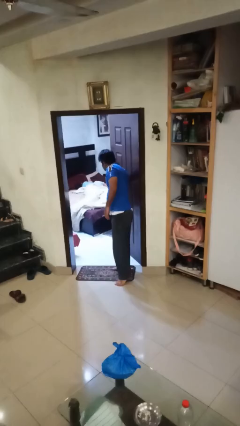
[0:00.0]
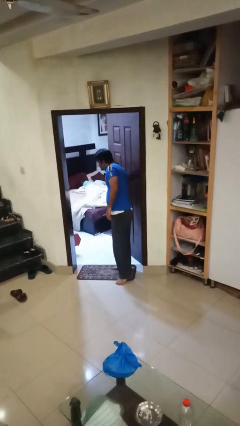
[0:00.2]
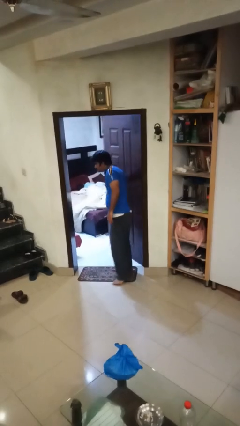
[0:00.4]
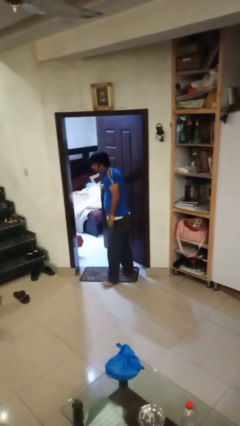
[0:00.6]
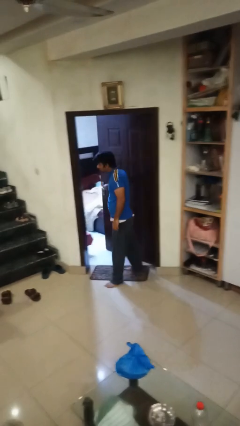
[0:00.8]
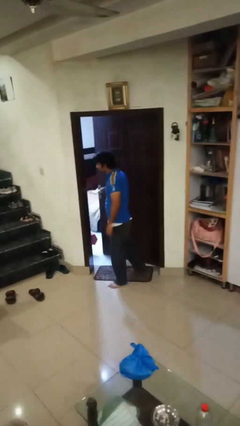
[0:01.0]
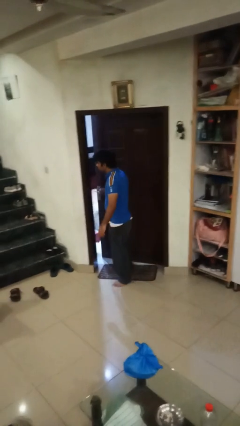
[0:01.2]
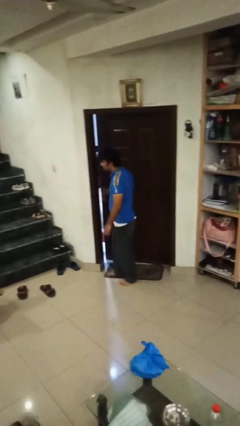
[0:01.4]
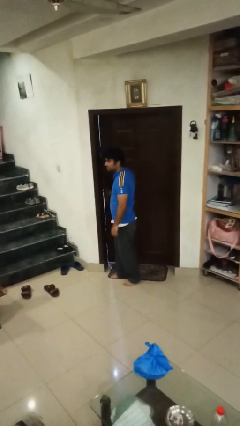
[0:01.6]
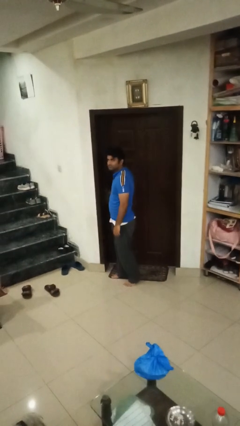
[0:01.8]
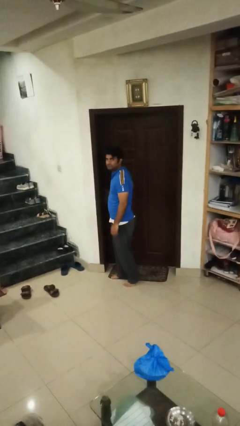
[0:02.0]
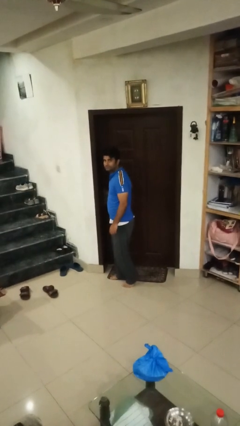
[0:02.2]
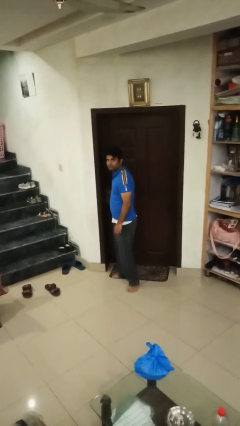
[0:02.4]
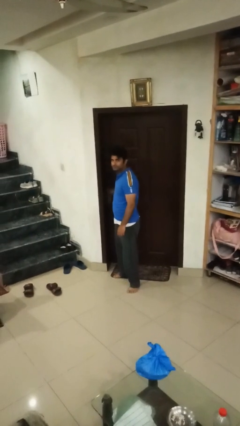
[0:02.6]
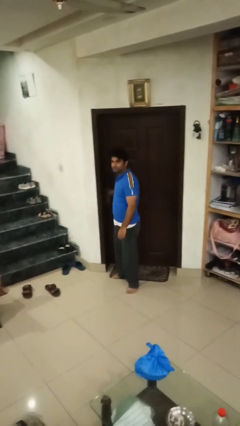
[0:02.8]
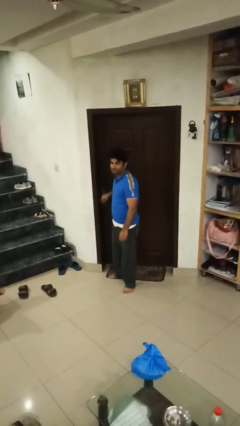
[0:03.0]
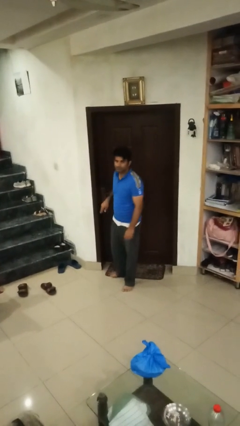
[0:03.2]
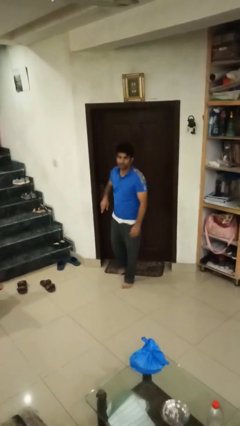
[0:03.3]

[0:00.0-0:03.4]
person closes facility door

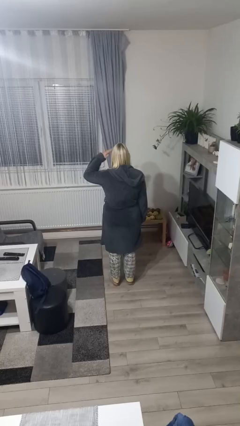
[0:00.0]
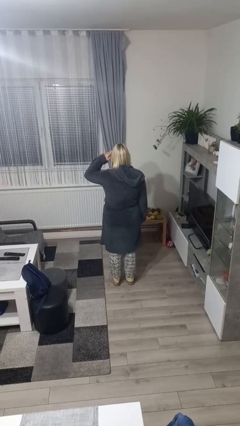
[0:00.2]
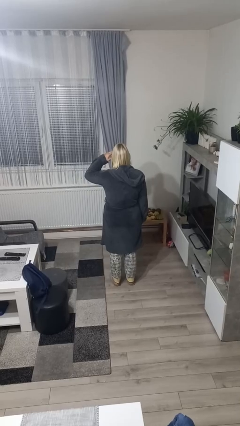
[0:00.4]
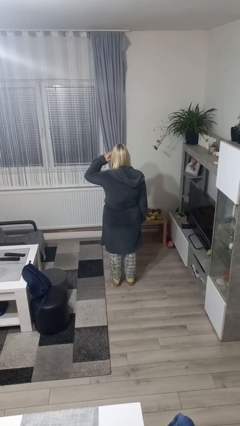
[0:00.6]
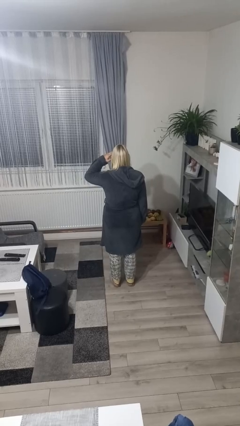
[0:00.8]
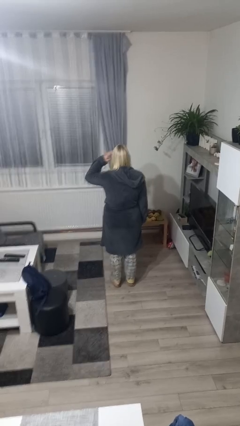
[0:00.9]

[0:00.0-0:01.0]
person salutes

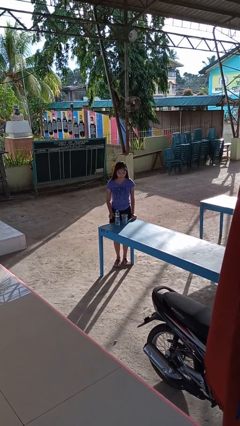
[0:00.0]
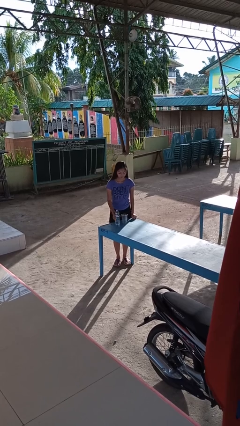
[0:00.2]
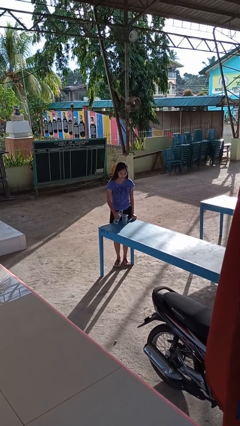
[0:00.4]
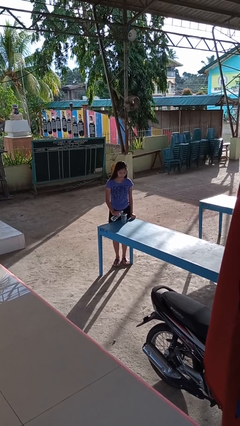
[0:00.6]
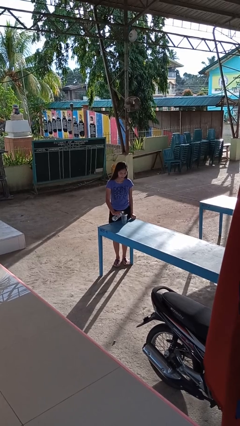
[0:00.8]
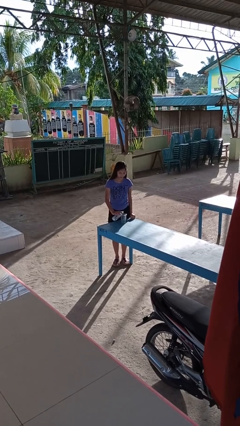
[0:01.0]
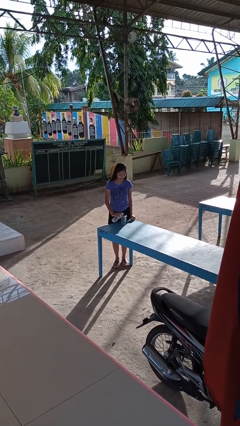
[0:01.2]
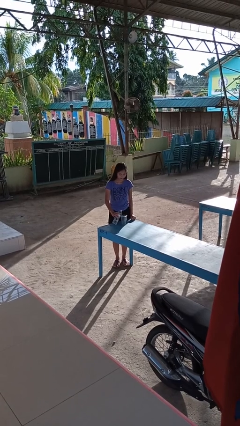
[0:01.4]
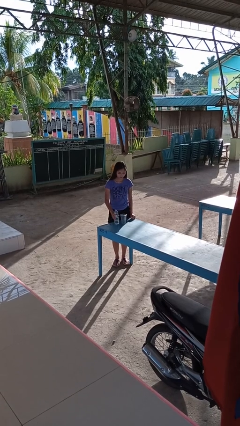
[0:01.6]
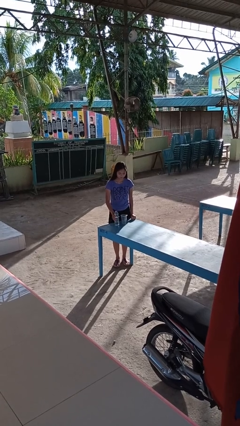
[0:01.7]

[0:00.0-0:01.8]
person pours liquid into cup

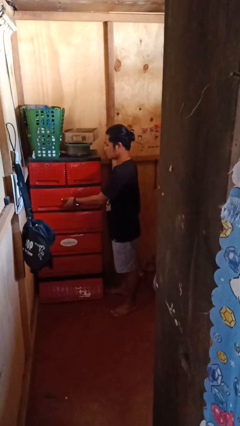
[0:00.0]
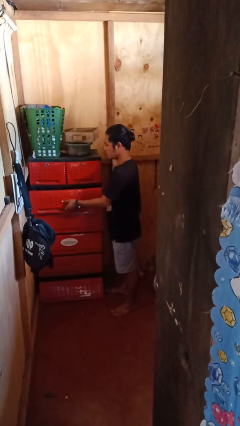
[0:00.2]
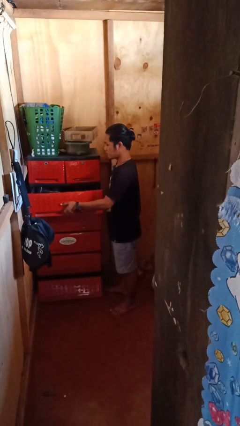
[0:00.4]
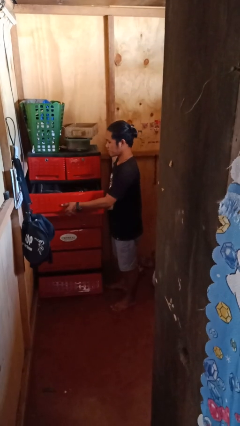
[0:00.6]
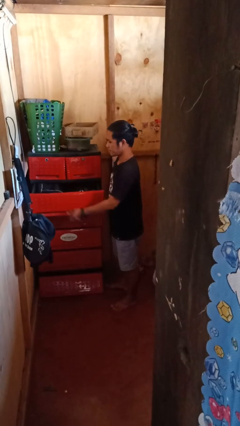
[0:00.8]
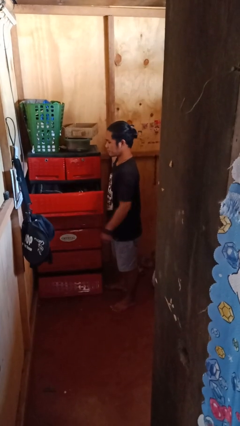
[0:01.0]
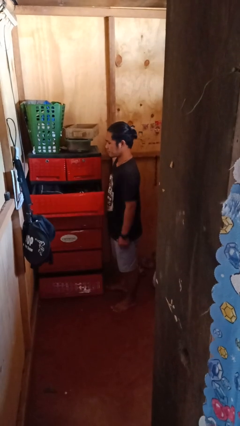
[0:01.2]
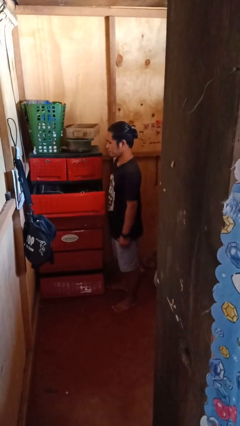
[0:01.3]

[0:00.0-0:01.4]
person opens dresser drawer

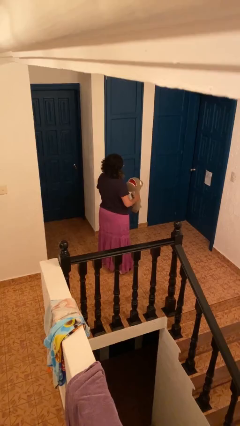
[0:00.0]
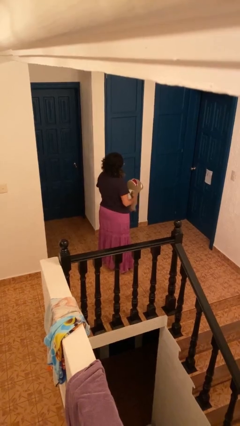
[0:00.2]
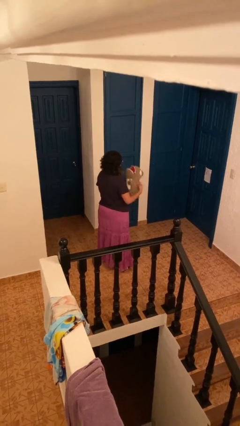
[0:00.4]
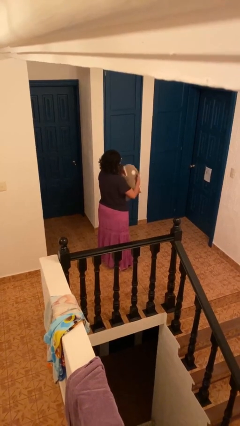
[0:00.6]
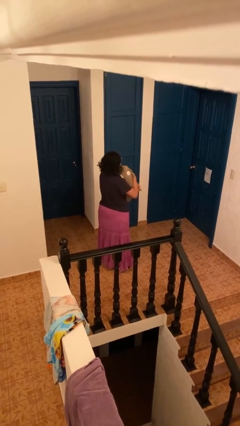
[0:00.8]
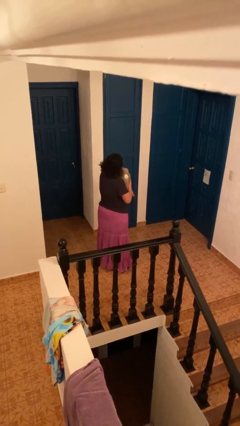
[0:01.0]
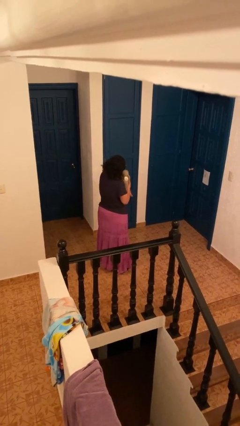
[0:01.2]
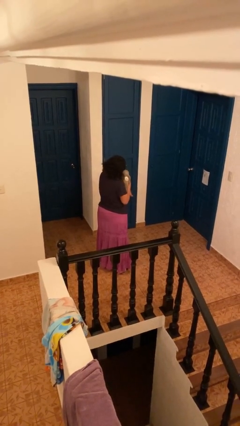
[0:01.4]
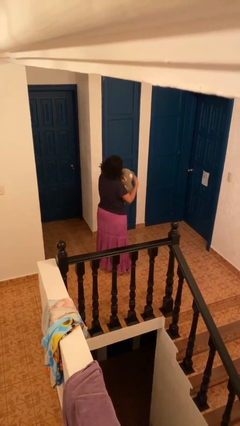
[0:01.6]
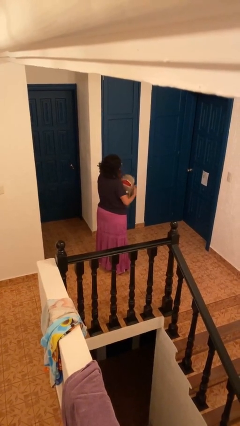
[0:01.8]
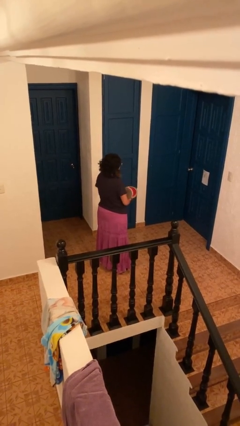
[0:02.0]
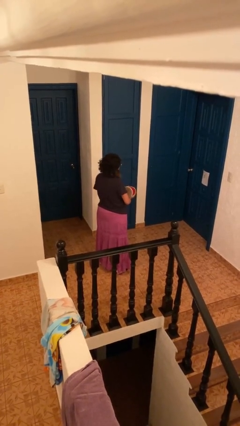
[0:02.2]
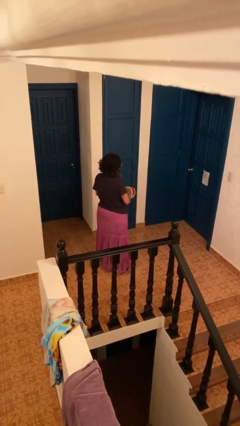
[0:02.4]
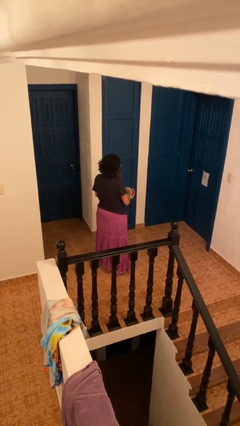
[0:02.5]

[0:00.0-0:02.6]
person hugs stuffed animal

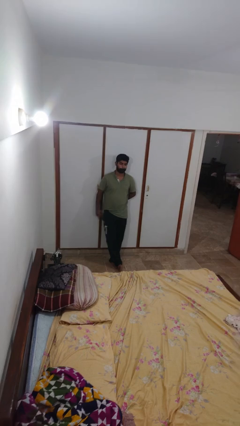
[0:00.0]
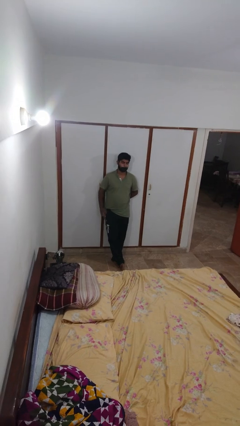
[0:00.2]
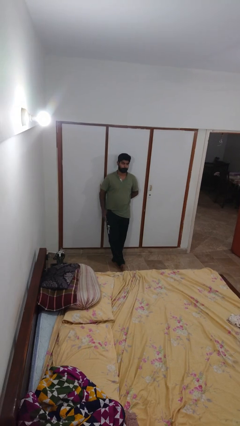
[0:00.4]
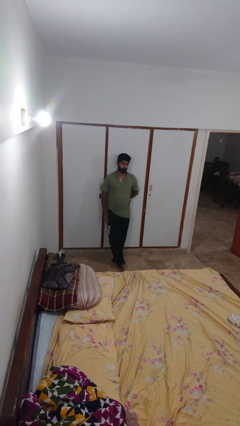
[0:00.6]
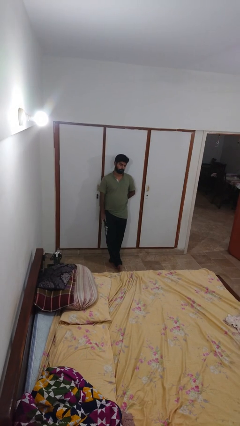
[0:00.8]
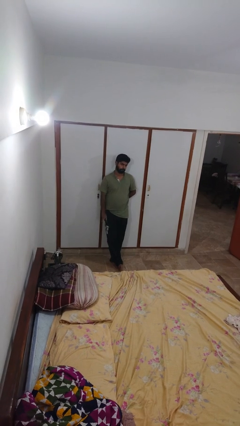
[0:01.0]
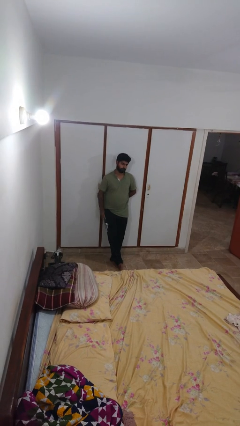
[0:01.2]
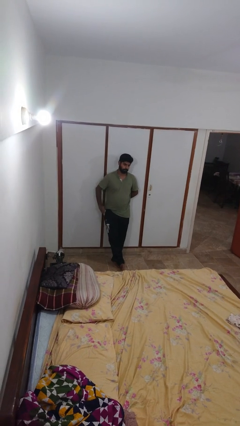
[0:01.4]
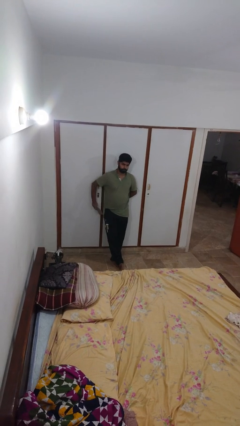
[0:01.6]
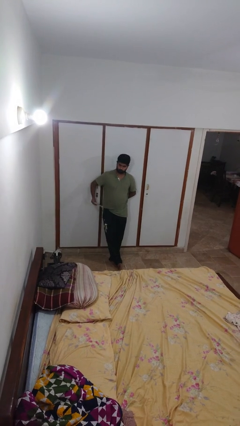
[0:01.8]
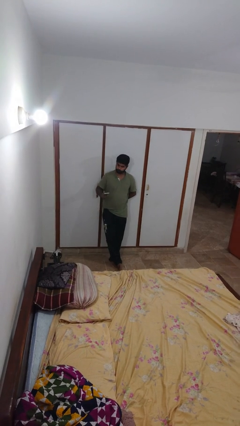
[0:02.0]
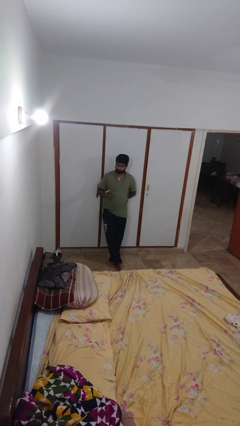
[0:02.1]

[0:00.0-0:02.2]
person takes phone from pocket

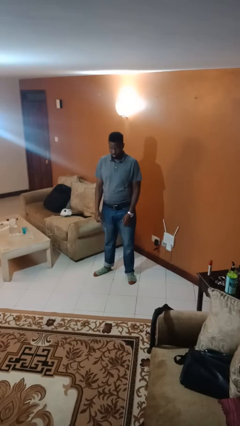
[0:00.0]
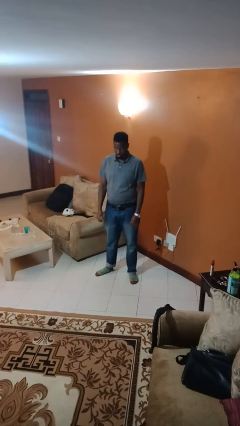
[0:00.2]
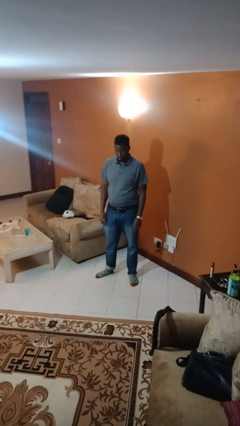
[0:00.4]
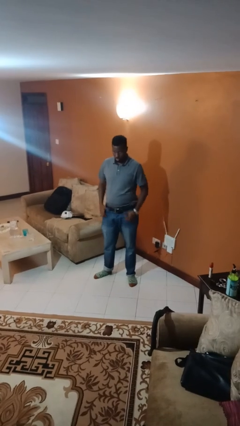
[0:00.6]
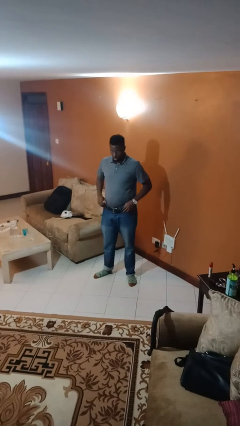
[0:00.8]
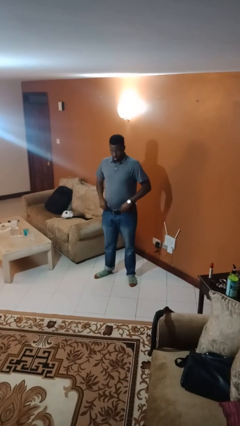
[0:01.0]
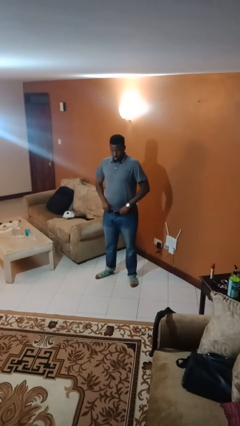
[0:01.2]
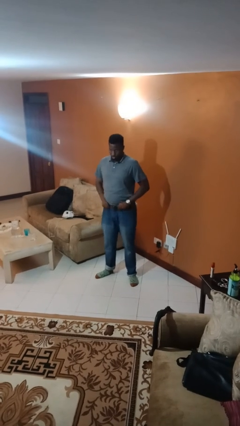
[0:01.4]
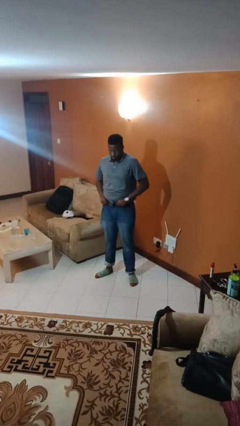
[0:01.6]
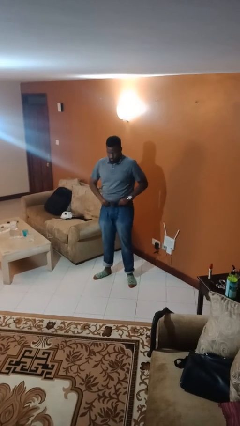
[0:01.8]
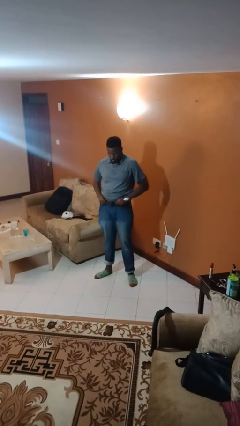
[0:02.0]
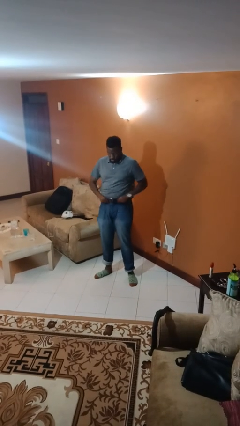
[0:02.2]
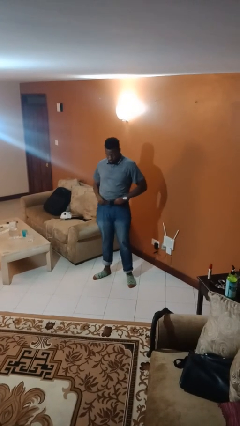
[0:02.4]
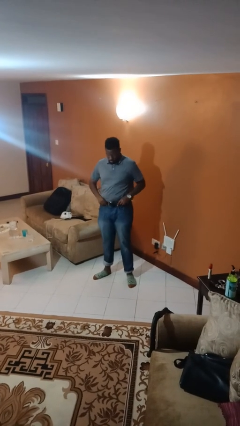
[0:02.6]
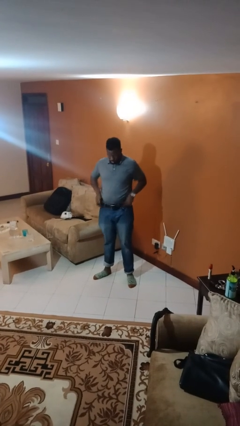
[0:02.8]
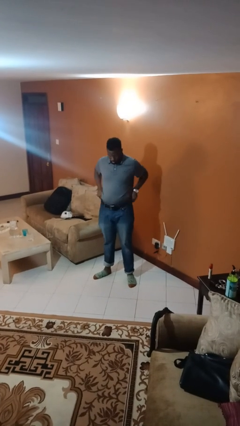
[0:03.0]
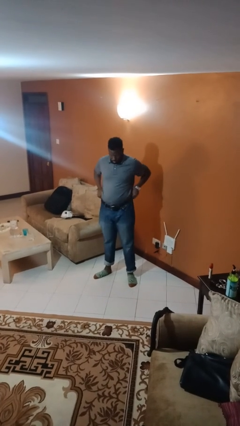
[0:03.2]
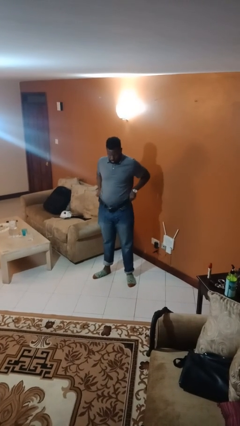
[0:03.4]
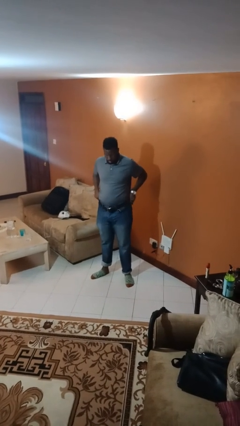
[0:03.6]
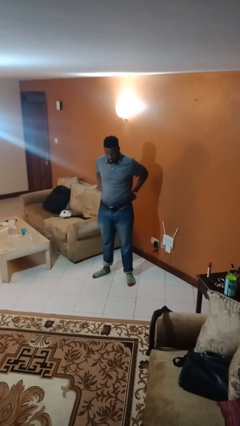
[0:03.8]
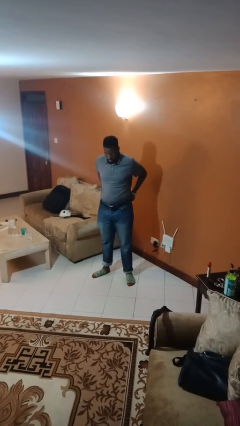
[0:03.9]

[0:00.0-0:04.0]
person hikes up pants

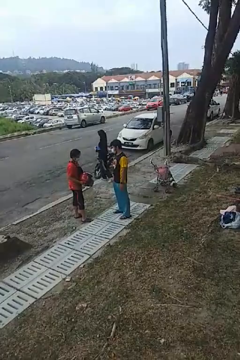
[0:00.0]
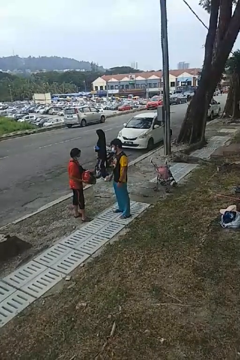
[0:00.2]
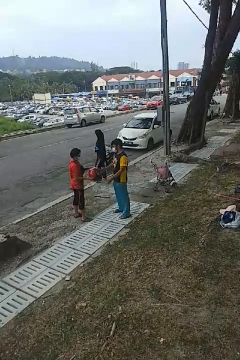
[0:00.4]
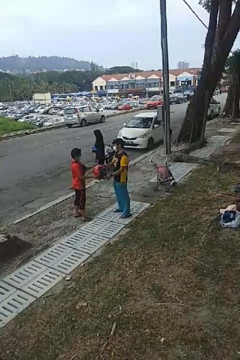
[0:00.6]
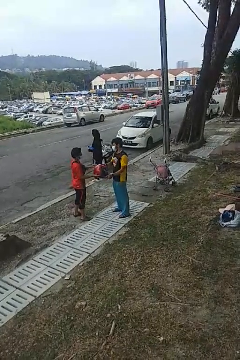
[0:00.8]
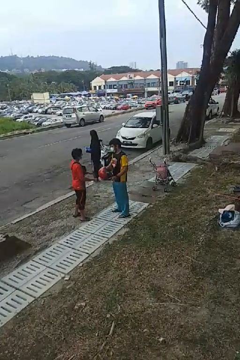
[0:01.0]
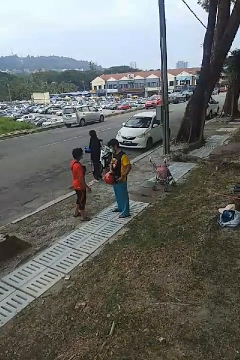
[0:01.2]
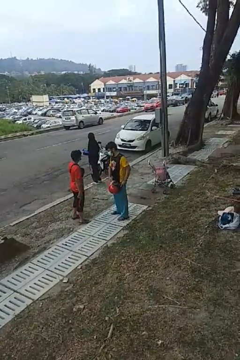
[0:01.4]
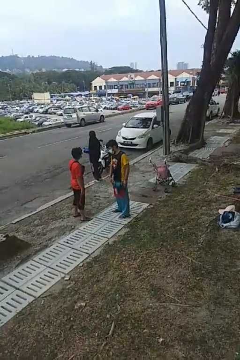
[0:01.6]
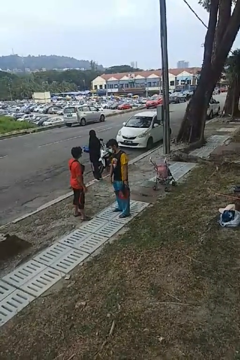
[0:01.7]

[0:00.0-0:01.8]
person transfers object to person
